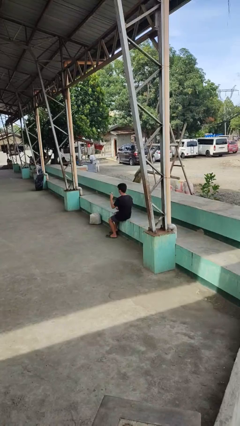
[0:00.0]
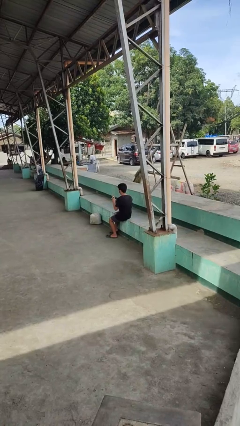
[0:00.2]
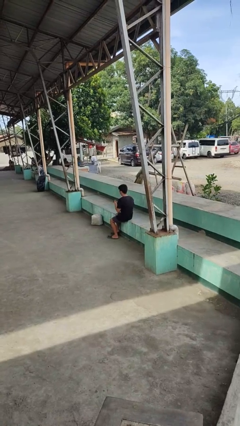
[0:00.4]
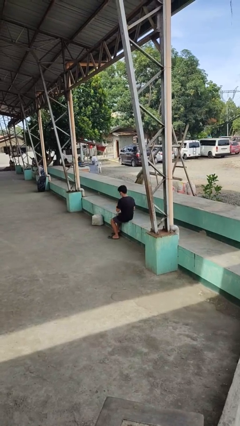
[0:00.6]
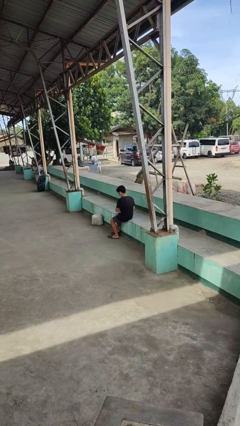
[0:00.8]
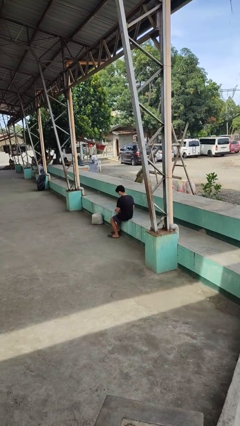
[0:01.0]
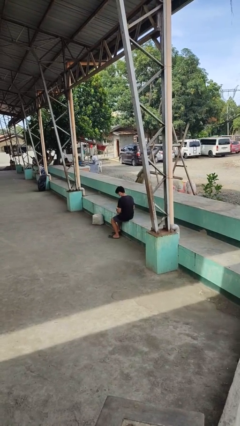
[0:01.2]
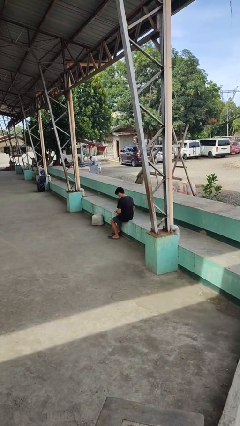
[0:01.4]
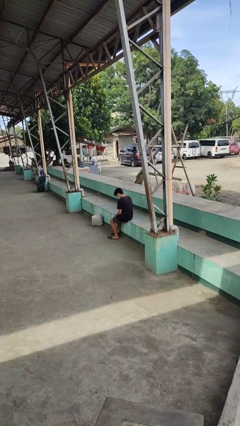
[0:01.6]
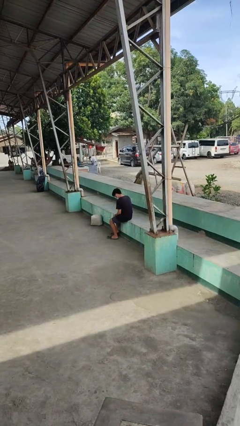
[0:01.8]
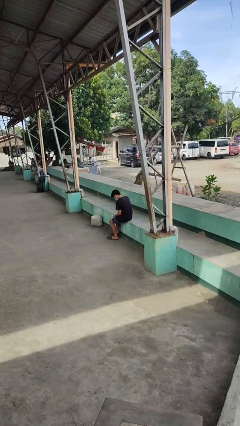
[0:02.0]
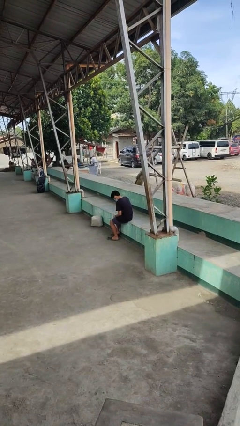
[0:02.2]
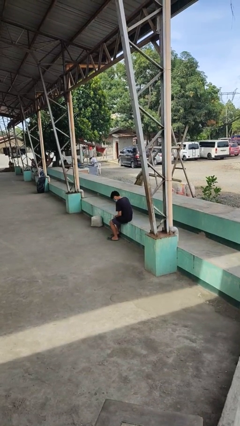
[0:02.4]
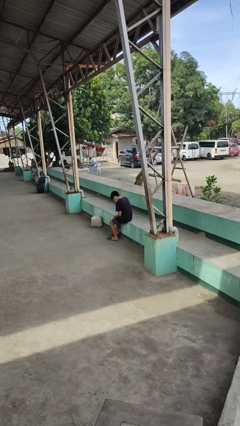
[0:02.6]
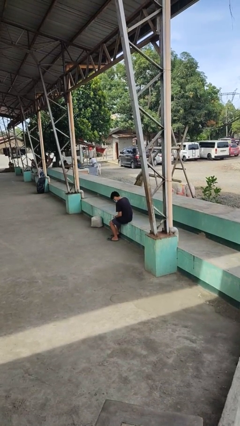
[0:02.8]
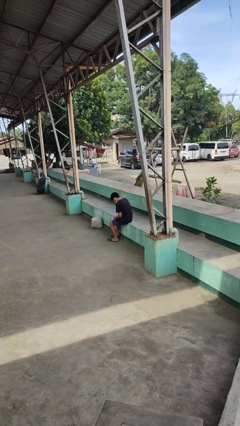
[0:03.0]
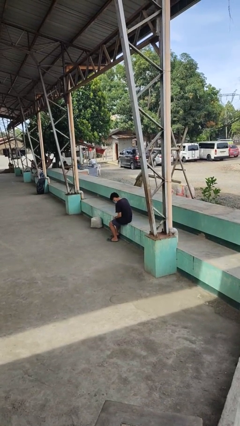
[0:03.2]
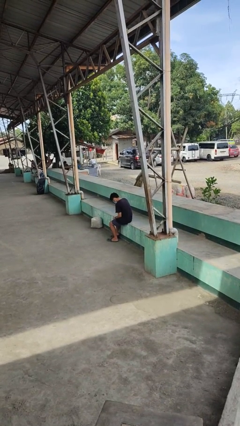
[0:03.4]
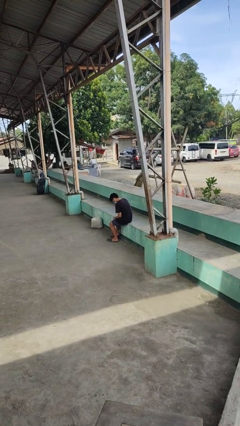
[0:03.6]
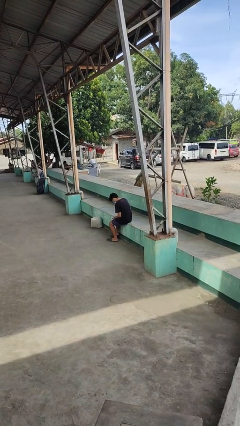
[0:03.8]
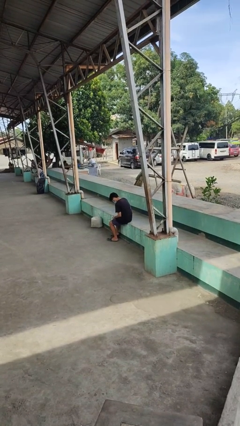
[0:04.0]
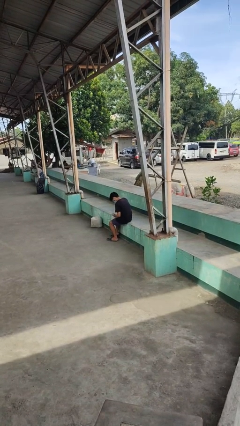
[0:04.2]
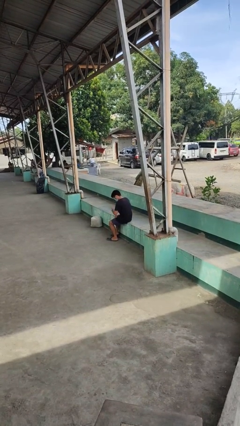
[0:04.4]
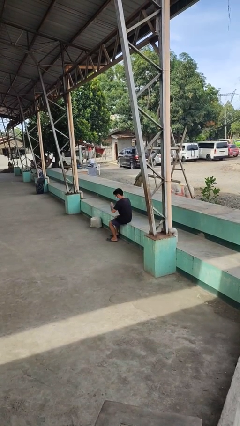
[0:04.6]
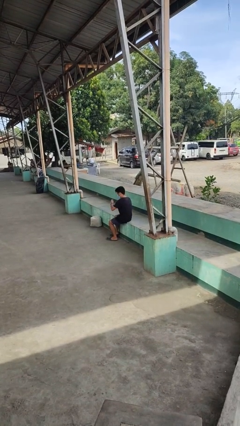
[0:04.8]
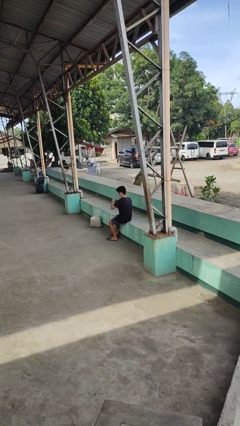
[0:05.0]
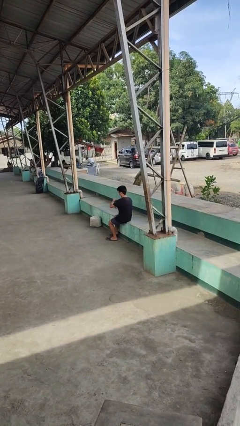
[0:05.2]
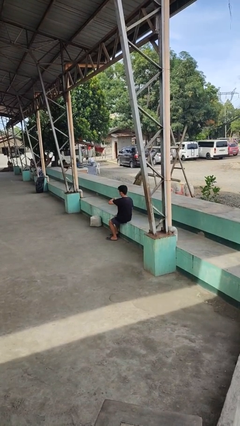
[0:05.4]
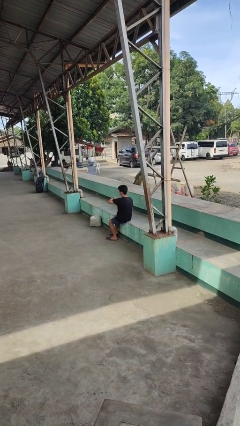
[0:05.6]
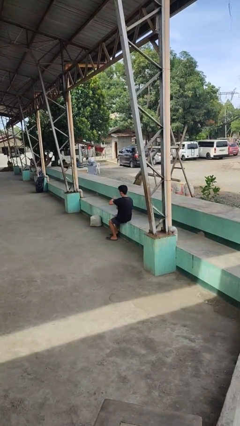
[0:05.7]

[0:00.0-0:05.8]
person puts on wristwatch

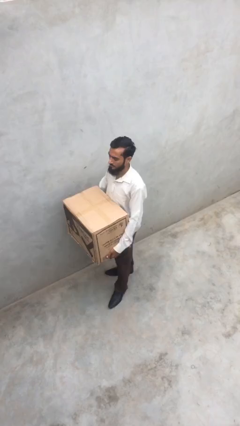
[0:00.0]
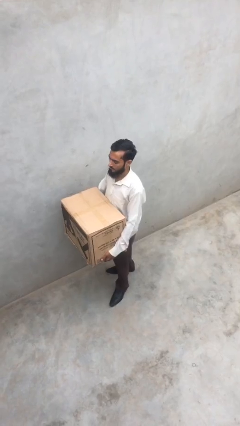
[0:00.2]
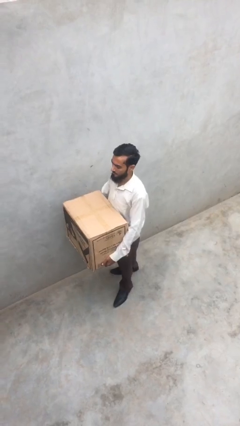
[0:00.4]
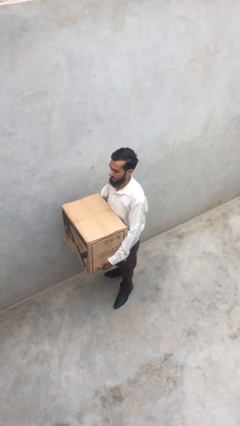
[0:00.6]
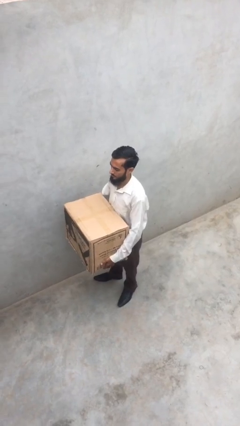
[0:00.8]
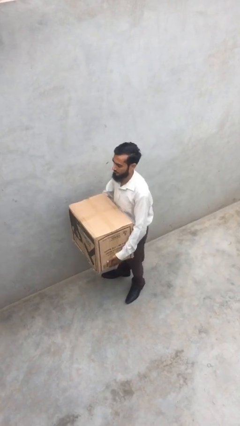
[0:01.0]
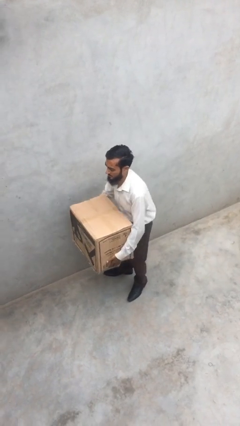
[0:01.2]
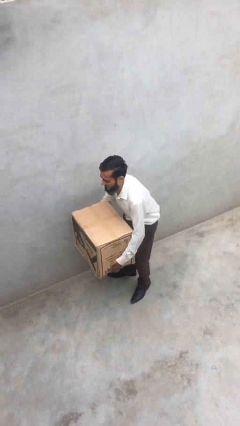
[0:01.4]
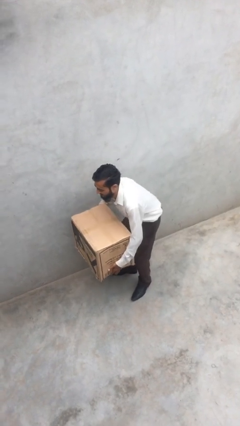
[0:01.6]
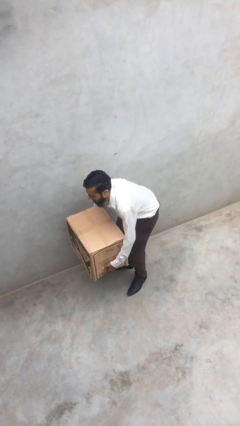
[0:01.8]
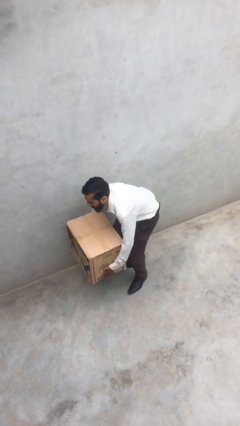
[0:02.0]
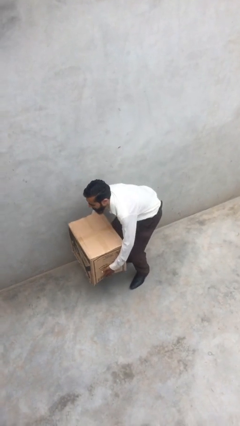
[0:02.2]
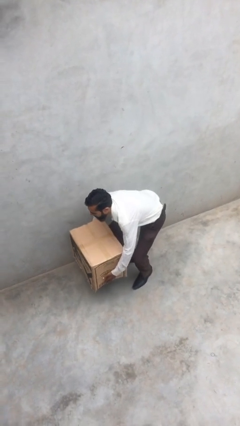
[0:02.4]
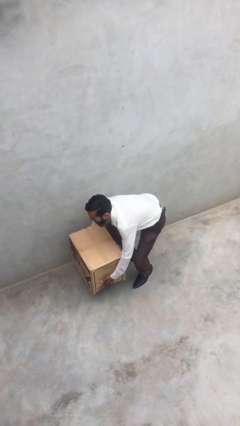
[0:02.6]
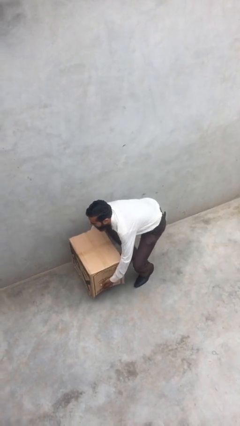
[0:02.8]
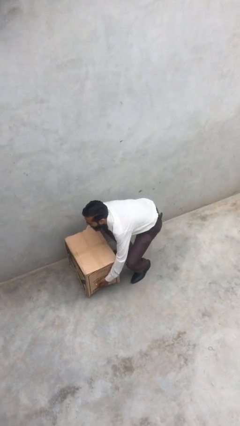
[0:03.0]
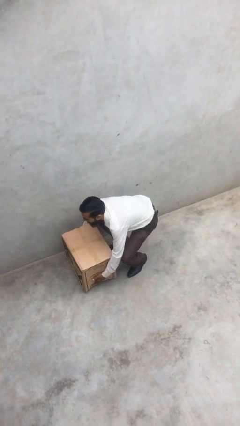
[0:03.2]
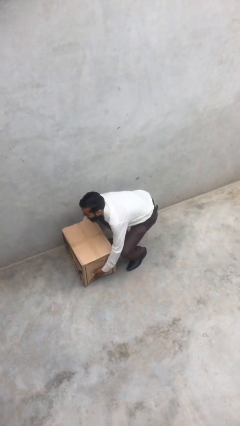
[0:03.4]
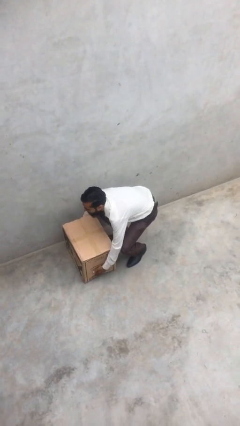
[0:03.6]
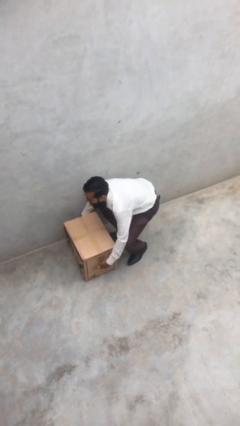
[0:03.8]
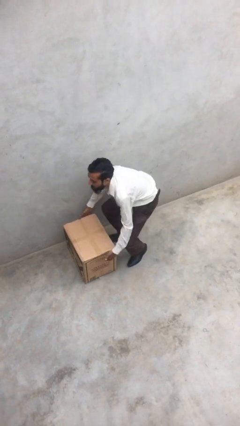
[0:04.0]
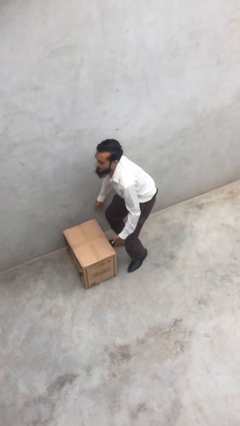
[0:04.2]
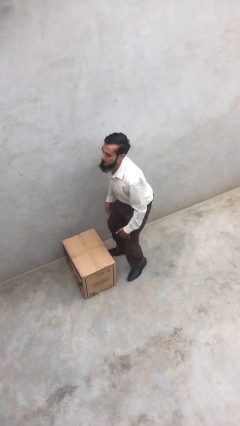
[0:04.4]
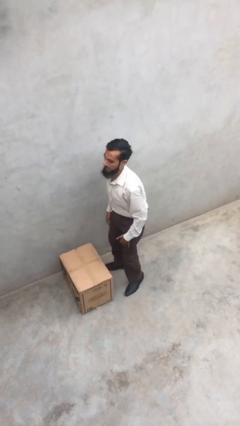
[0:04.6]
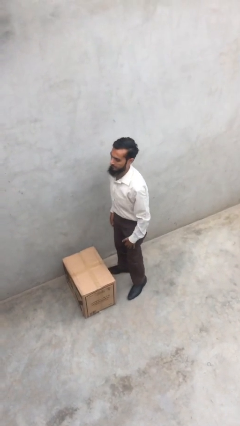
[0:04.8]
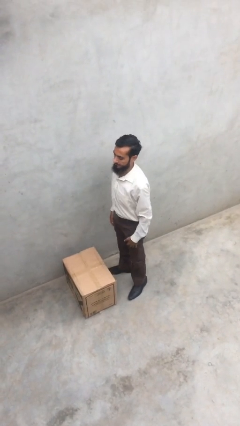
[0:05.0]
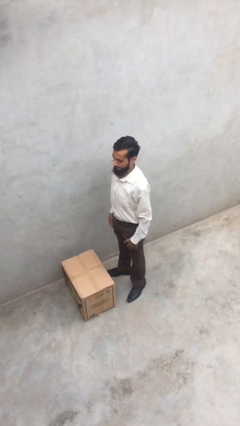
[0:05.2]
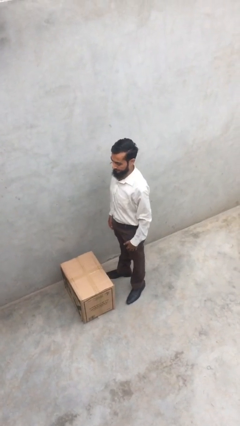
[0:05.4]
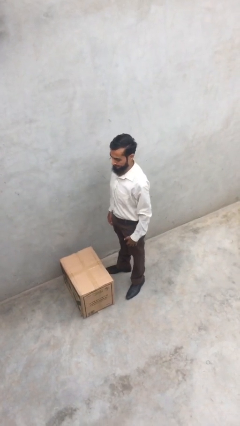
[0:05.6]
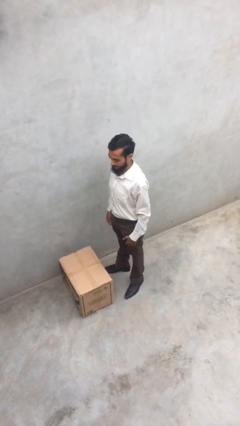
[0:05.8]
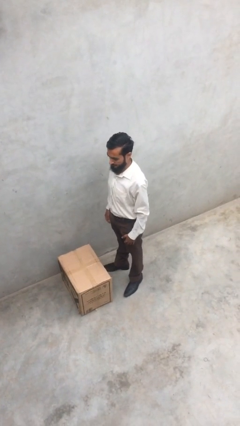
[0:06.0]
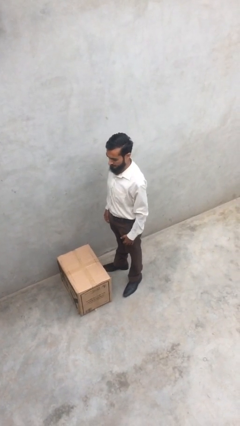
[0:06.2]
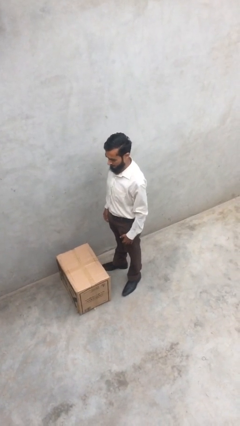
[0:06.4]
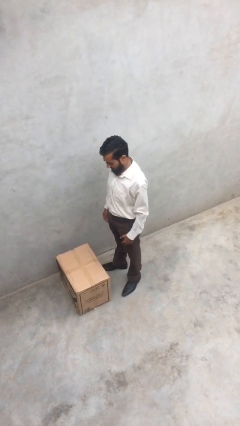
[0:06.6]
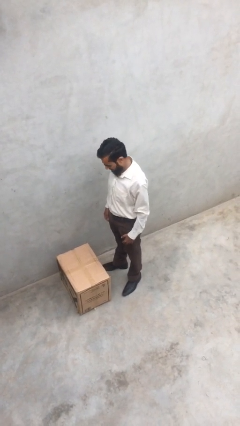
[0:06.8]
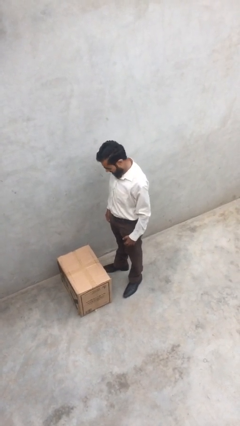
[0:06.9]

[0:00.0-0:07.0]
person puts down object on floor

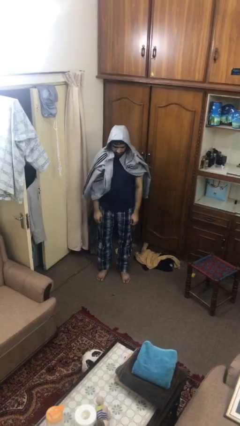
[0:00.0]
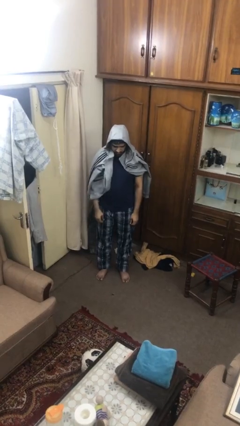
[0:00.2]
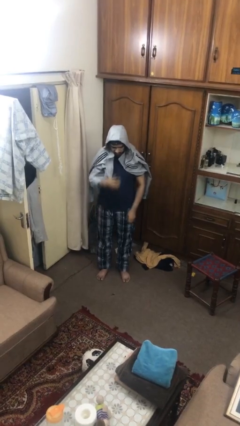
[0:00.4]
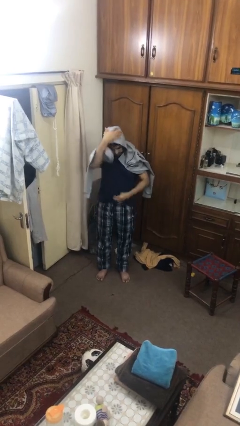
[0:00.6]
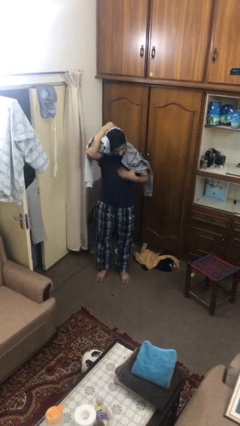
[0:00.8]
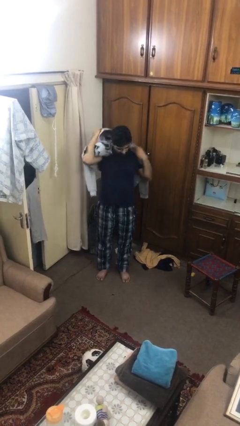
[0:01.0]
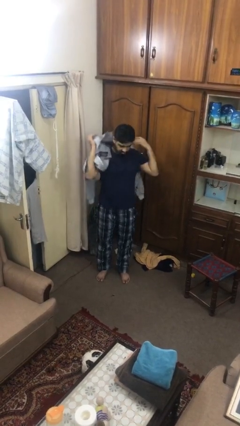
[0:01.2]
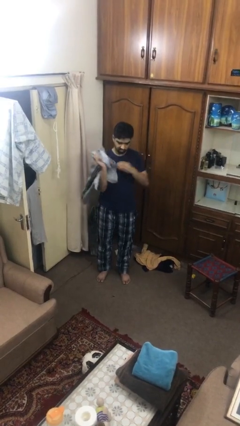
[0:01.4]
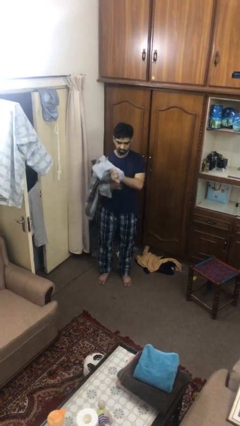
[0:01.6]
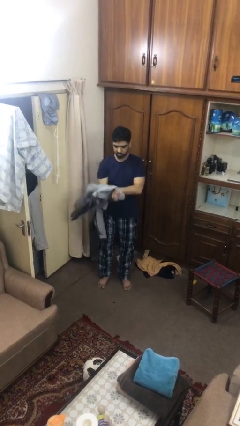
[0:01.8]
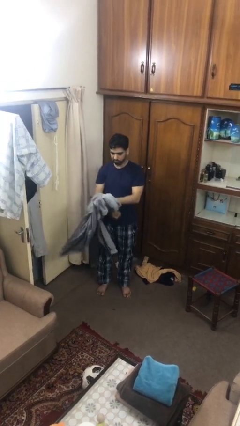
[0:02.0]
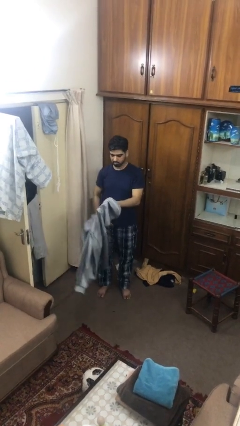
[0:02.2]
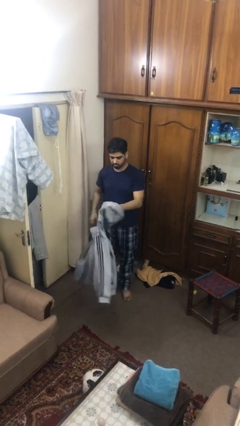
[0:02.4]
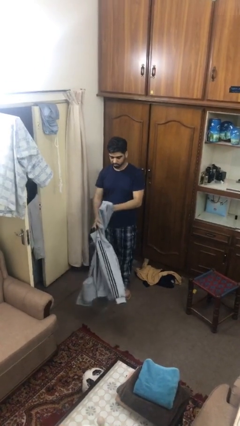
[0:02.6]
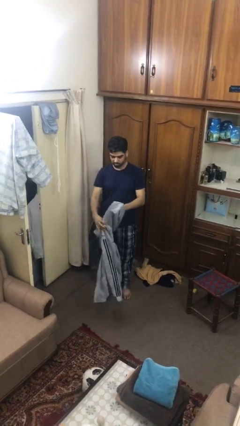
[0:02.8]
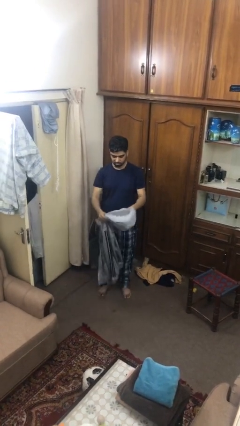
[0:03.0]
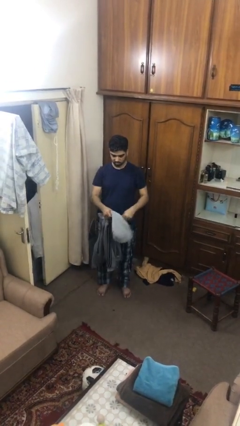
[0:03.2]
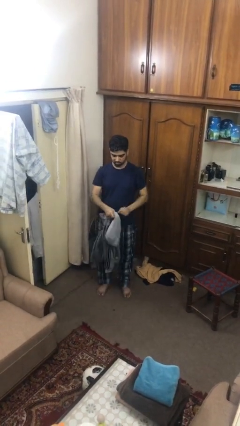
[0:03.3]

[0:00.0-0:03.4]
person takes off hoodie

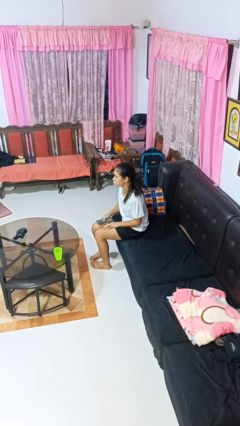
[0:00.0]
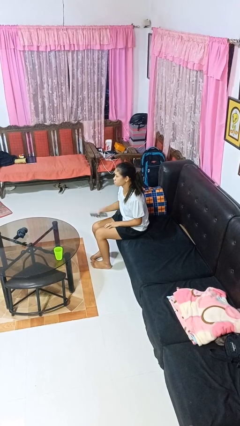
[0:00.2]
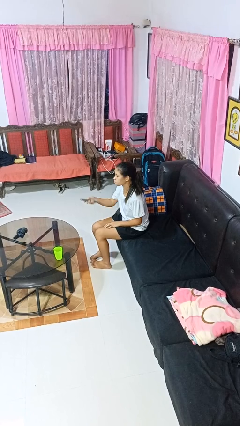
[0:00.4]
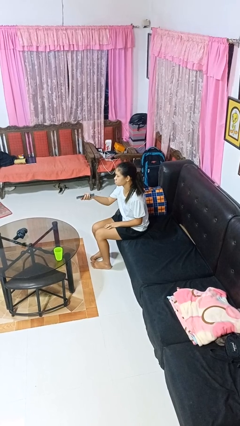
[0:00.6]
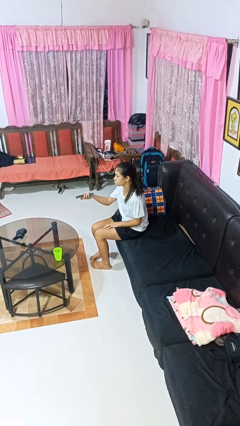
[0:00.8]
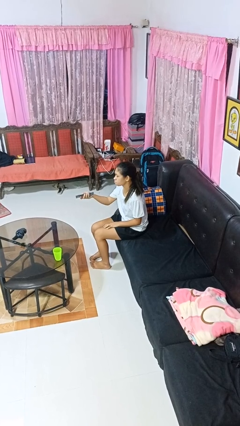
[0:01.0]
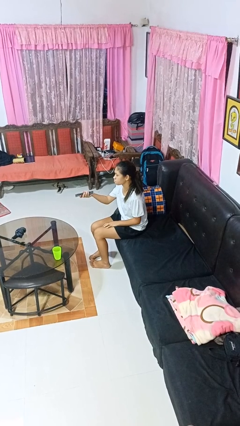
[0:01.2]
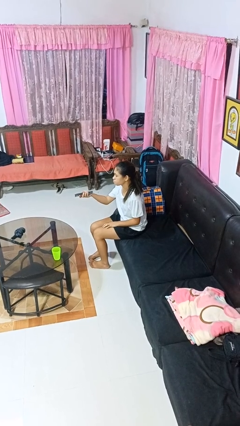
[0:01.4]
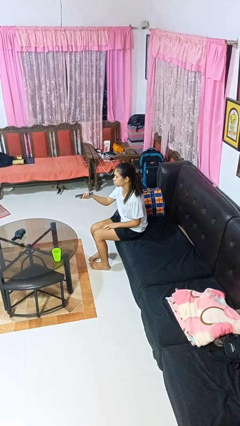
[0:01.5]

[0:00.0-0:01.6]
person uses television remote
